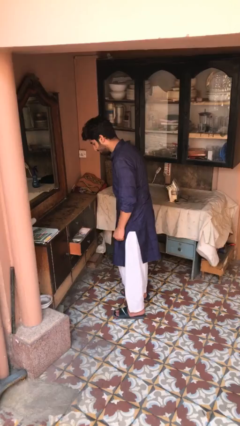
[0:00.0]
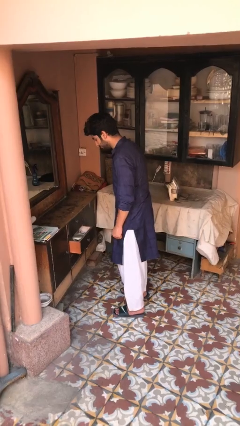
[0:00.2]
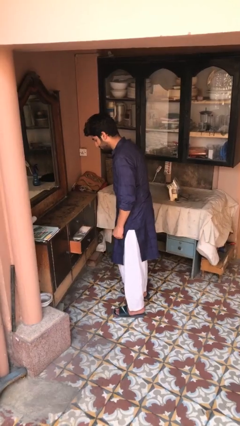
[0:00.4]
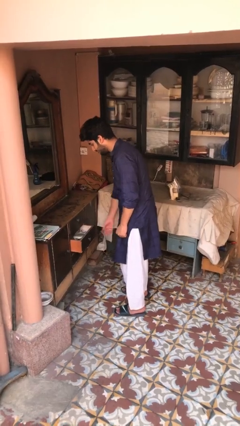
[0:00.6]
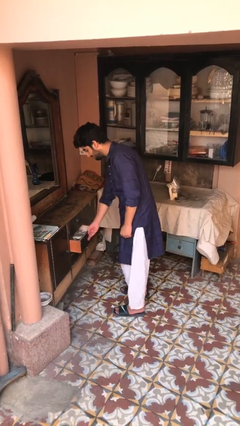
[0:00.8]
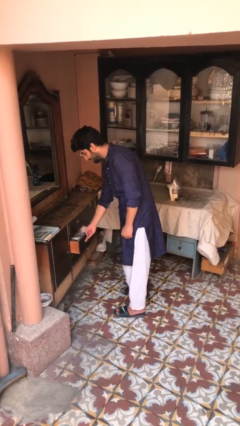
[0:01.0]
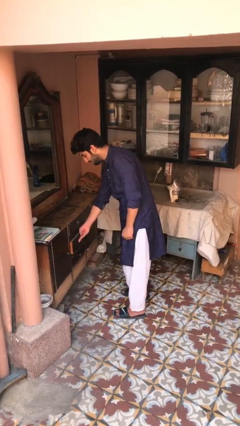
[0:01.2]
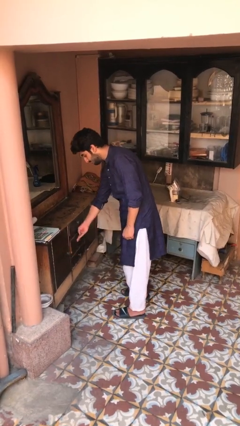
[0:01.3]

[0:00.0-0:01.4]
person closes dresser drawer

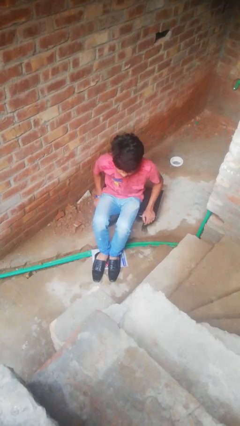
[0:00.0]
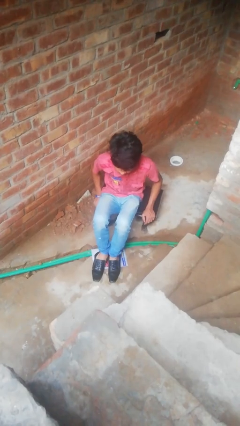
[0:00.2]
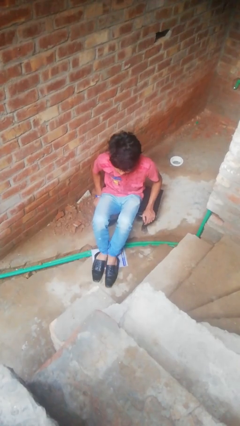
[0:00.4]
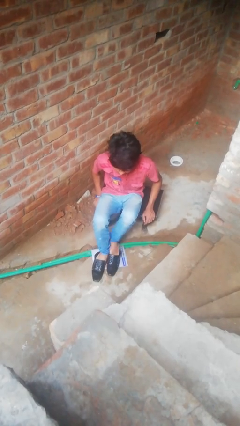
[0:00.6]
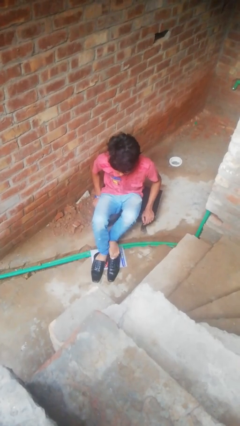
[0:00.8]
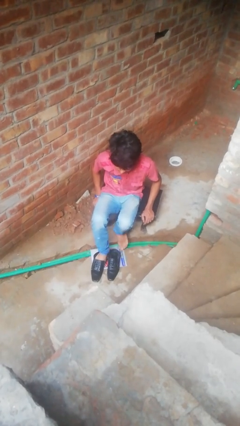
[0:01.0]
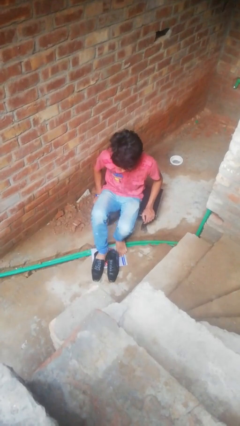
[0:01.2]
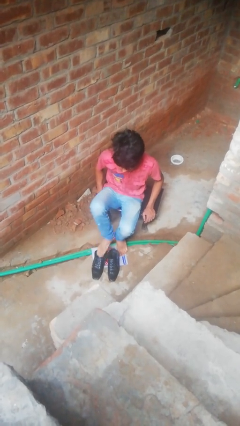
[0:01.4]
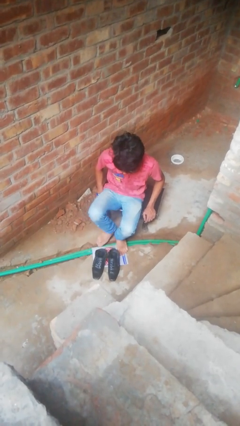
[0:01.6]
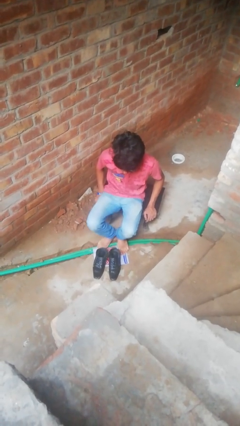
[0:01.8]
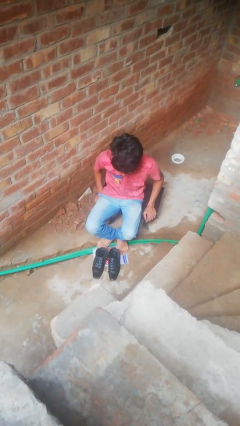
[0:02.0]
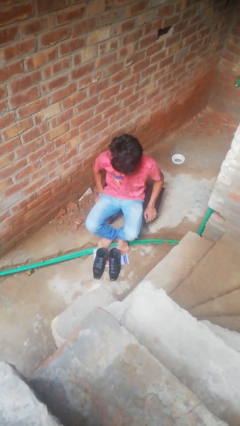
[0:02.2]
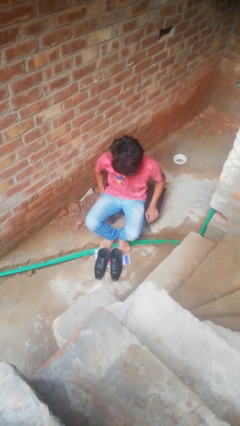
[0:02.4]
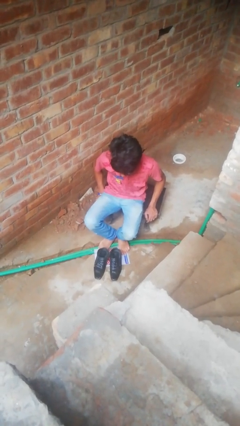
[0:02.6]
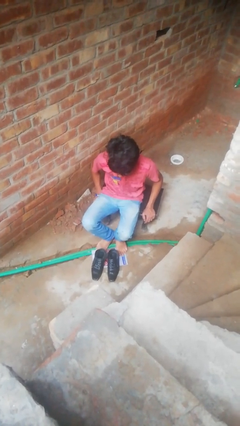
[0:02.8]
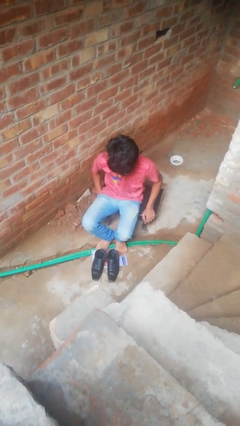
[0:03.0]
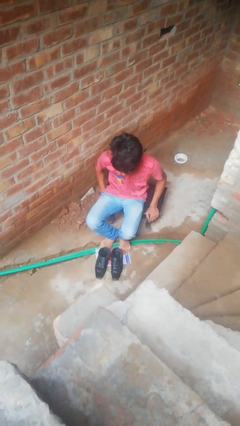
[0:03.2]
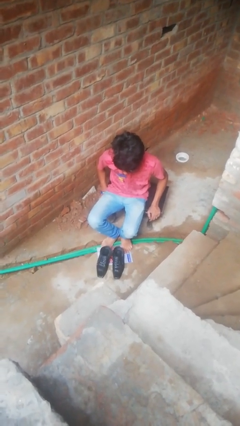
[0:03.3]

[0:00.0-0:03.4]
person takes off shoes

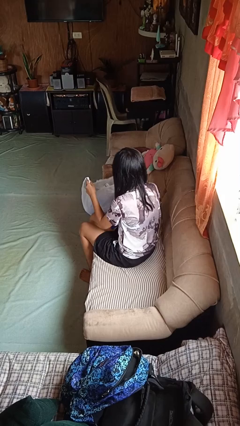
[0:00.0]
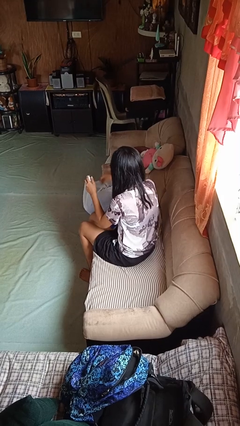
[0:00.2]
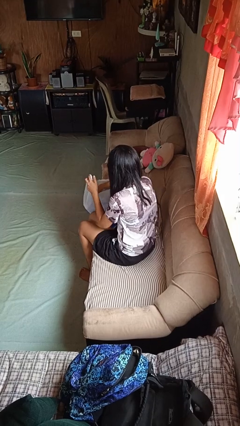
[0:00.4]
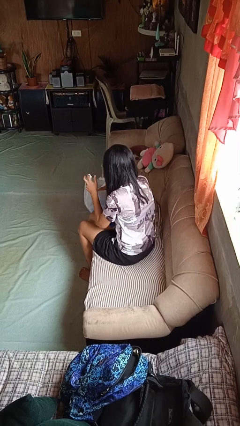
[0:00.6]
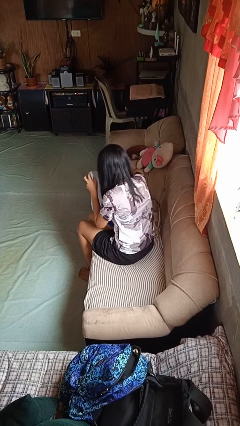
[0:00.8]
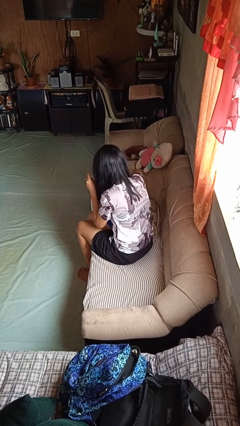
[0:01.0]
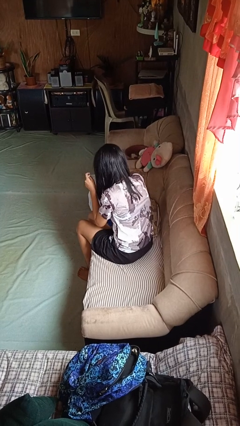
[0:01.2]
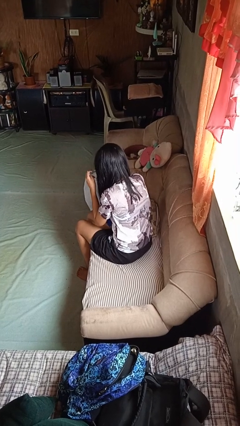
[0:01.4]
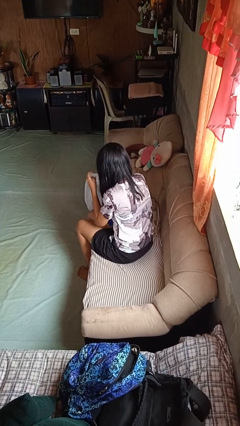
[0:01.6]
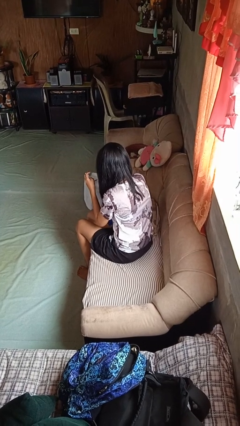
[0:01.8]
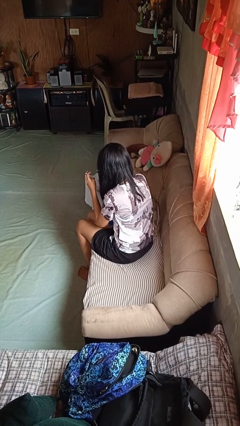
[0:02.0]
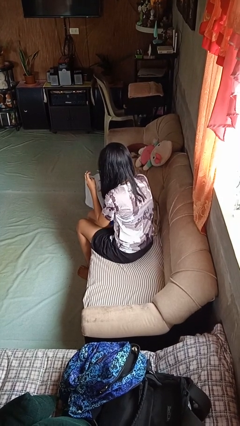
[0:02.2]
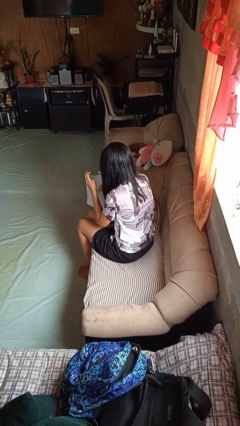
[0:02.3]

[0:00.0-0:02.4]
person searches in bag

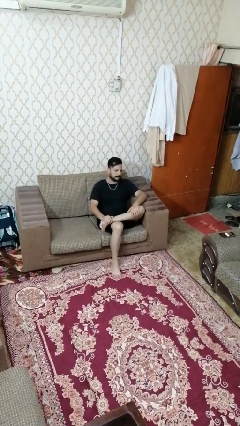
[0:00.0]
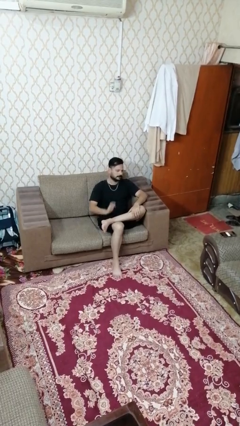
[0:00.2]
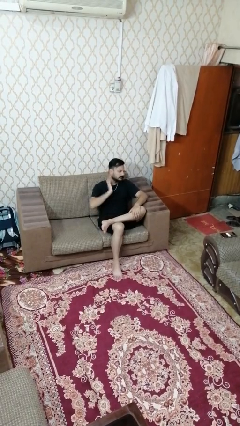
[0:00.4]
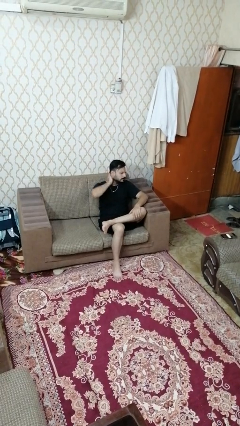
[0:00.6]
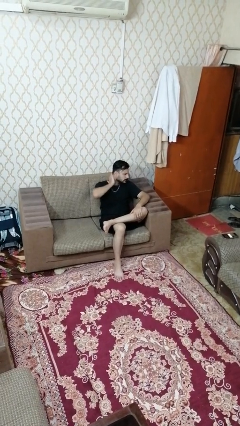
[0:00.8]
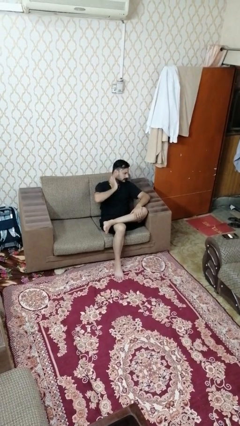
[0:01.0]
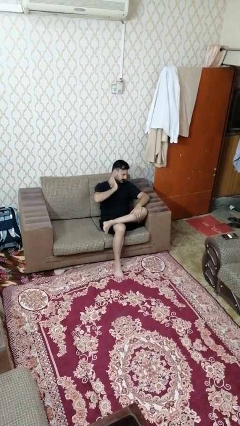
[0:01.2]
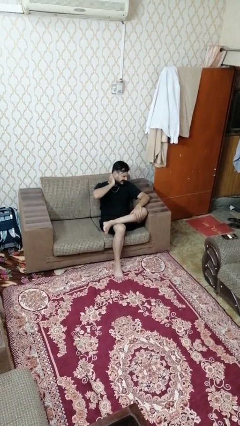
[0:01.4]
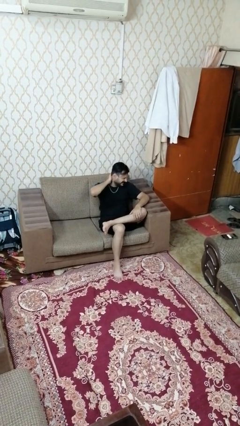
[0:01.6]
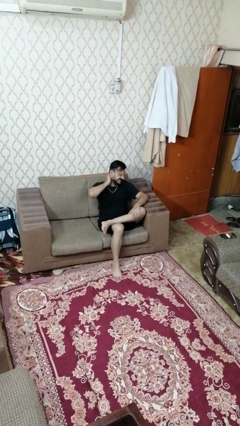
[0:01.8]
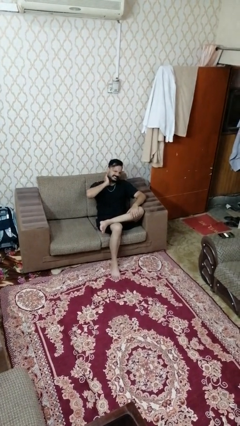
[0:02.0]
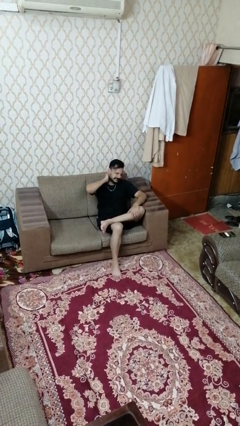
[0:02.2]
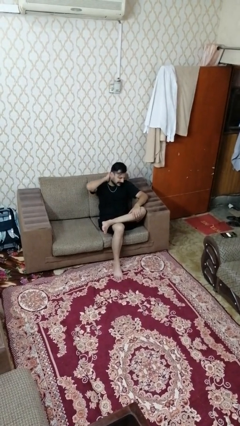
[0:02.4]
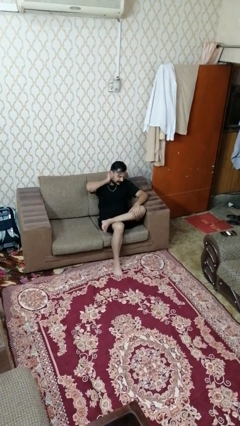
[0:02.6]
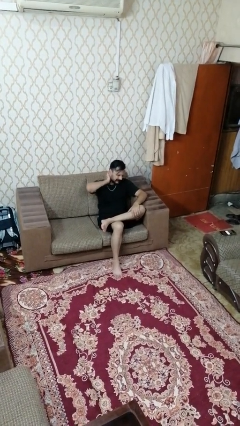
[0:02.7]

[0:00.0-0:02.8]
person rubs neck

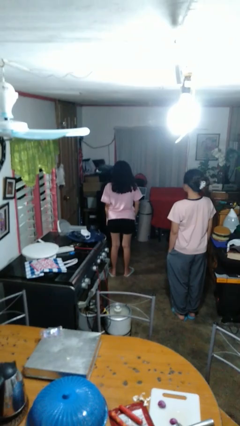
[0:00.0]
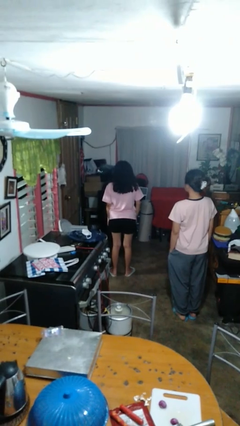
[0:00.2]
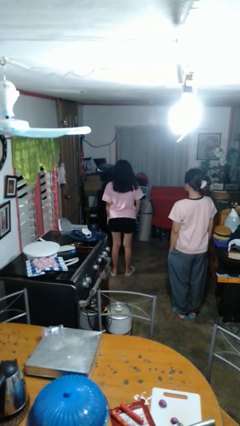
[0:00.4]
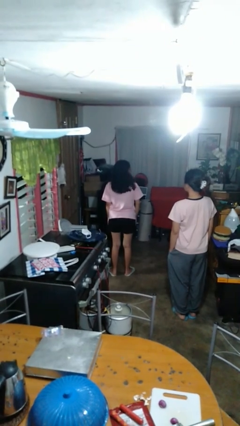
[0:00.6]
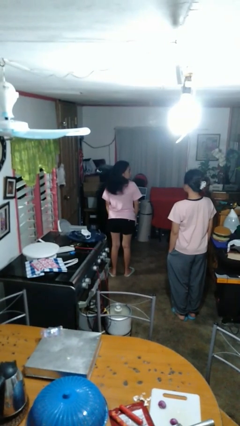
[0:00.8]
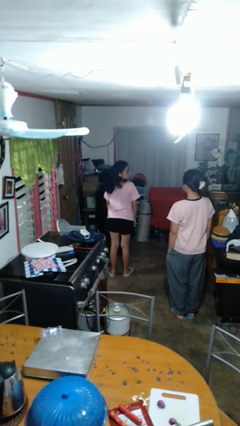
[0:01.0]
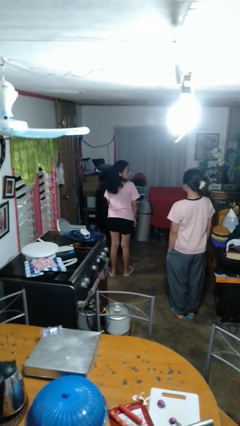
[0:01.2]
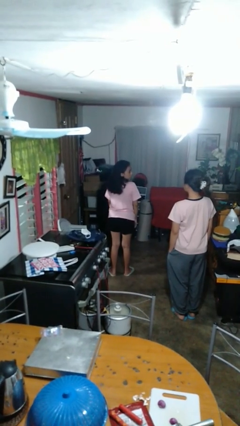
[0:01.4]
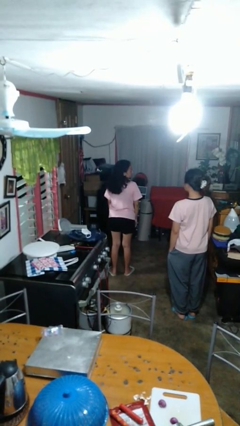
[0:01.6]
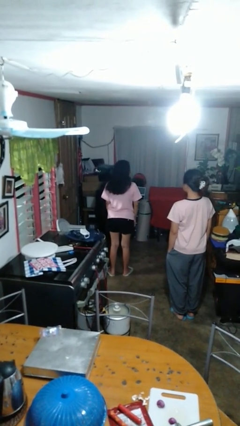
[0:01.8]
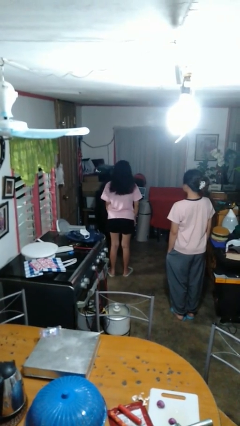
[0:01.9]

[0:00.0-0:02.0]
person looks over shoulder

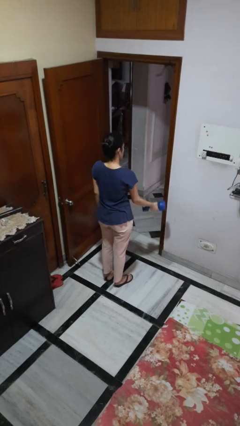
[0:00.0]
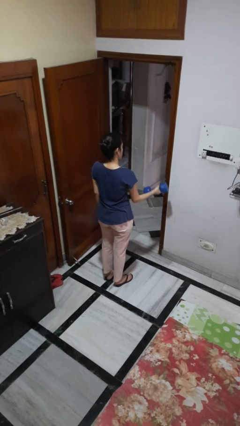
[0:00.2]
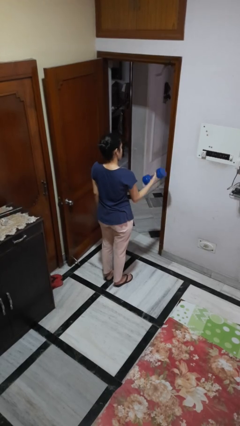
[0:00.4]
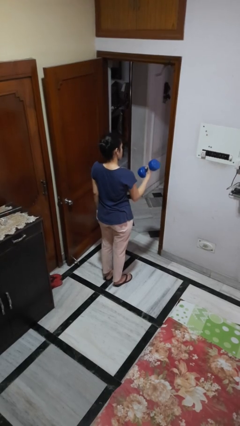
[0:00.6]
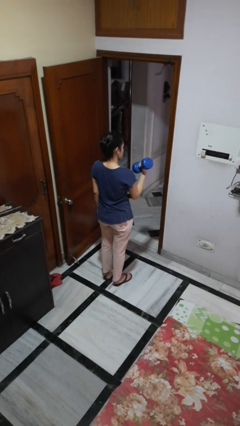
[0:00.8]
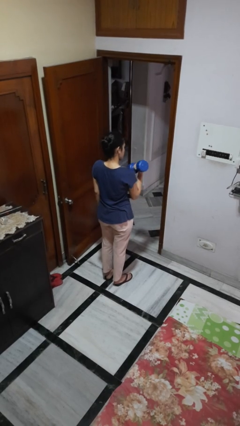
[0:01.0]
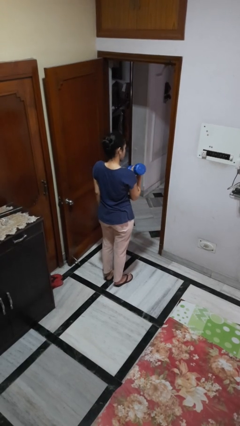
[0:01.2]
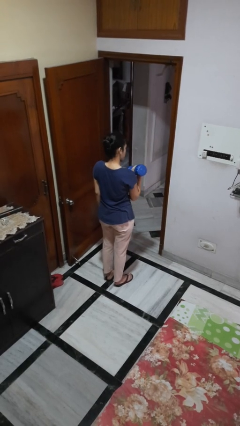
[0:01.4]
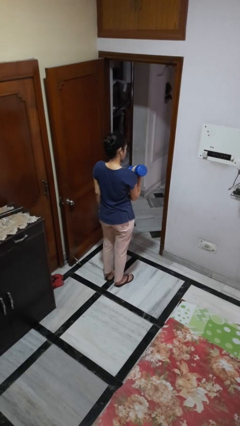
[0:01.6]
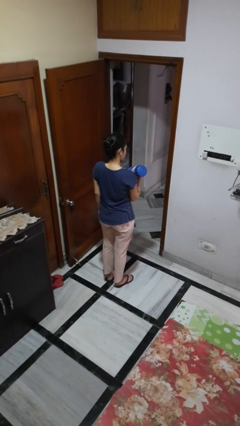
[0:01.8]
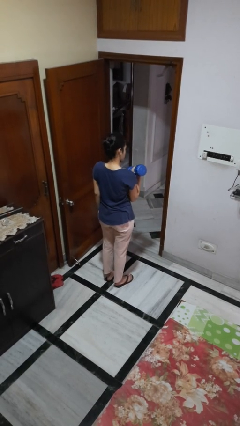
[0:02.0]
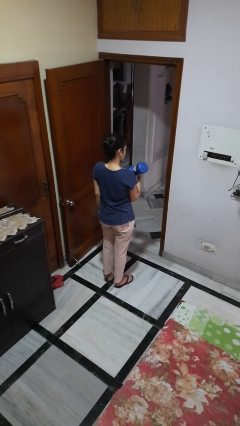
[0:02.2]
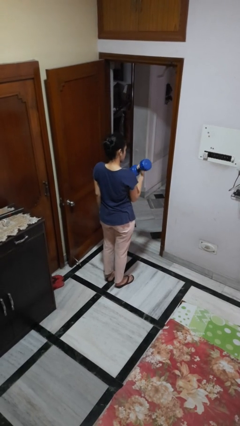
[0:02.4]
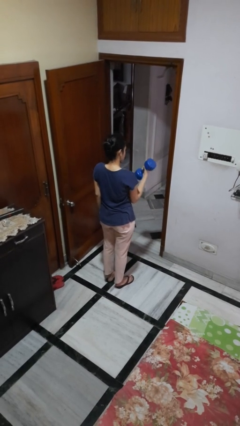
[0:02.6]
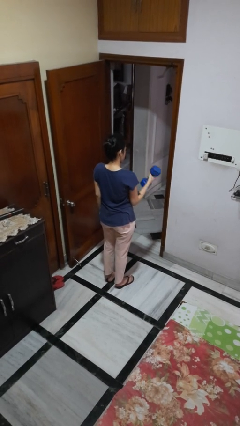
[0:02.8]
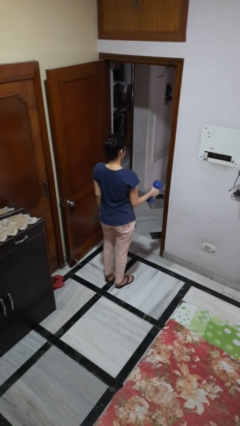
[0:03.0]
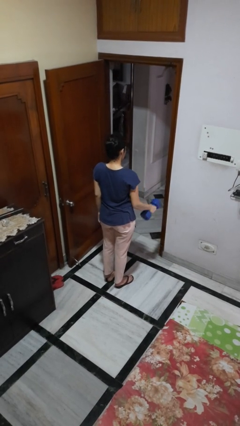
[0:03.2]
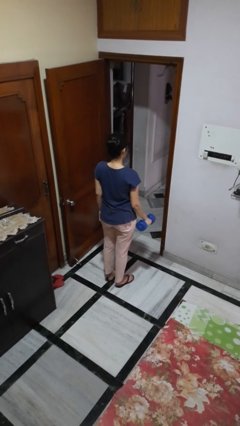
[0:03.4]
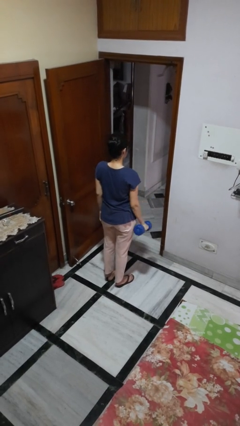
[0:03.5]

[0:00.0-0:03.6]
person lifts dumbbells

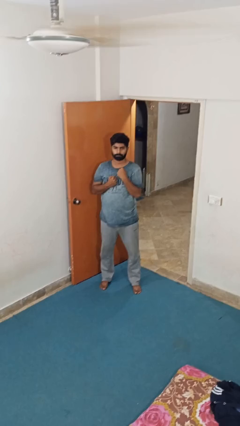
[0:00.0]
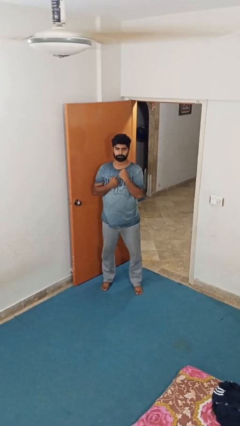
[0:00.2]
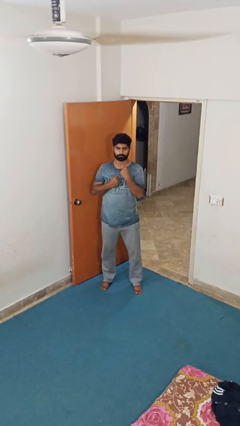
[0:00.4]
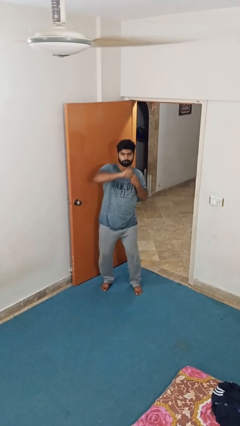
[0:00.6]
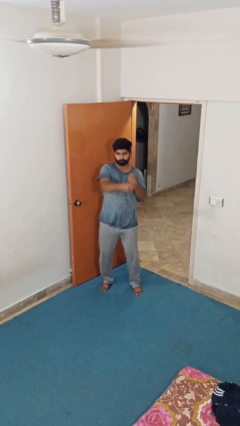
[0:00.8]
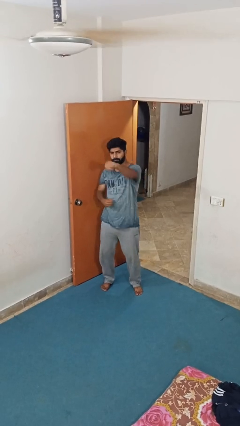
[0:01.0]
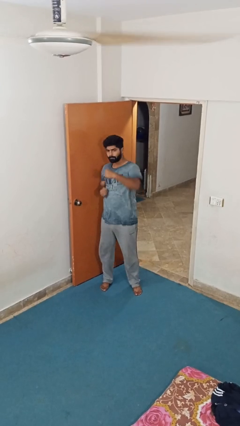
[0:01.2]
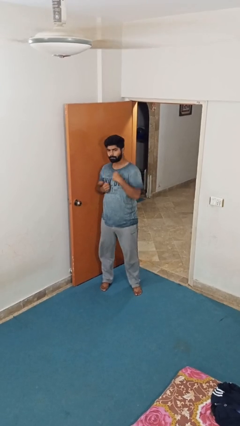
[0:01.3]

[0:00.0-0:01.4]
person punches

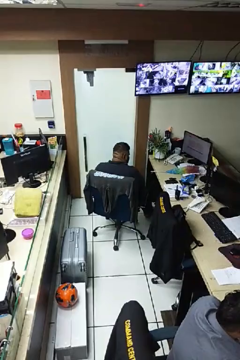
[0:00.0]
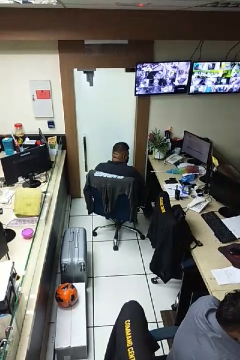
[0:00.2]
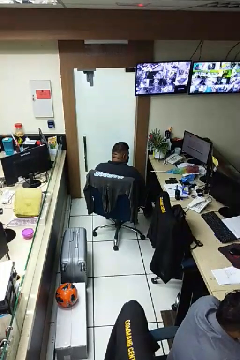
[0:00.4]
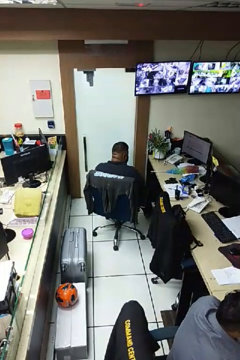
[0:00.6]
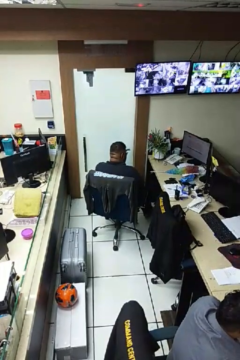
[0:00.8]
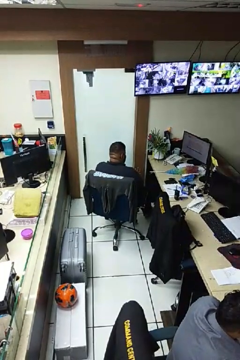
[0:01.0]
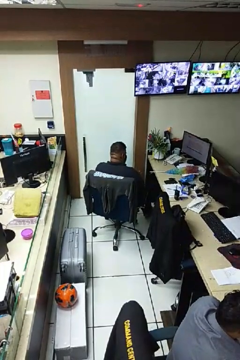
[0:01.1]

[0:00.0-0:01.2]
person swats bug
